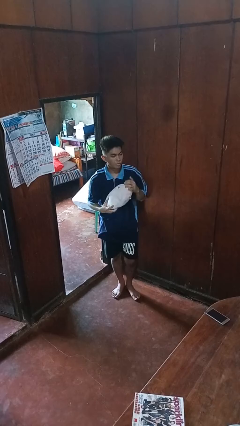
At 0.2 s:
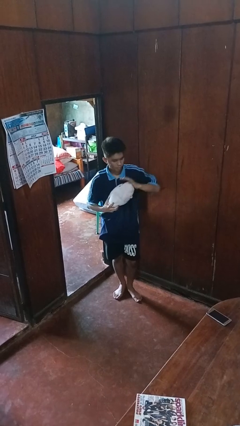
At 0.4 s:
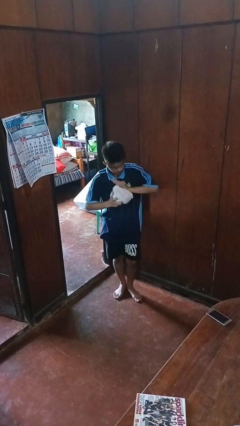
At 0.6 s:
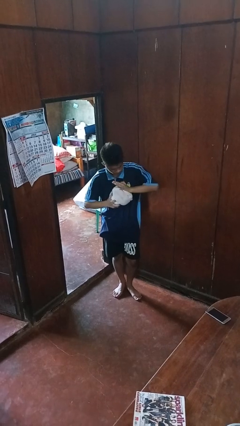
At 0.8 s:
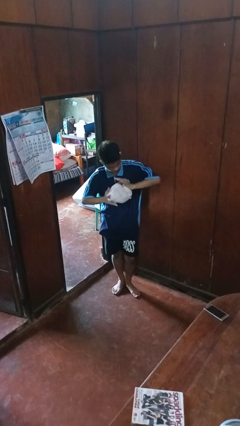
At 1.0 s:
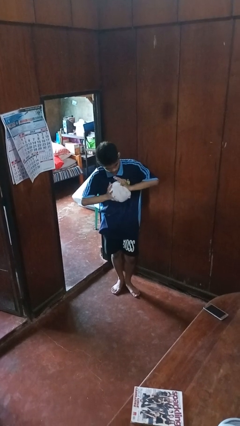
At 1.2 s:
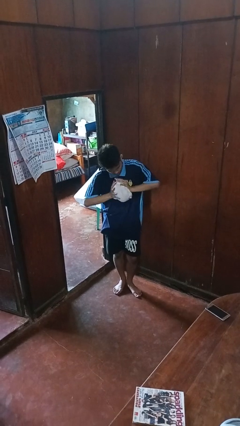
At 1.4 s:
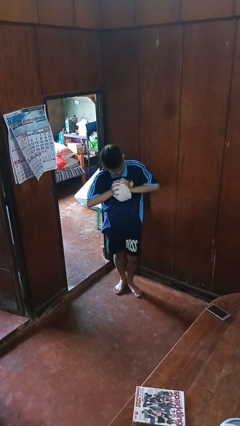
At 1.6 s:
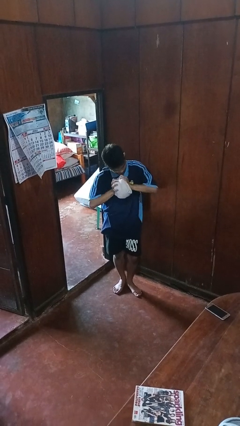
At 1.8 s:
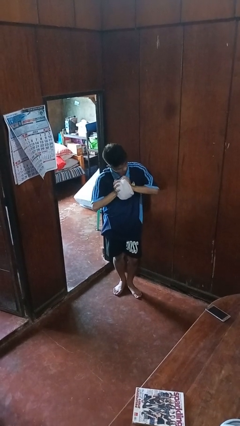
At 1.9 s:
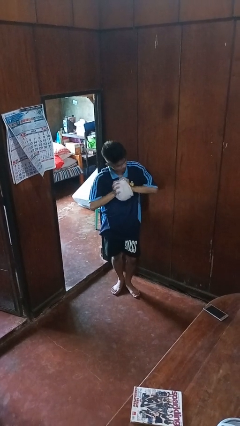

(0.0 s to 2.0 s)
person squeezes object

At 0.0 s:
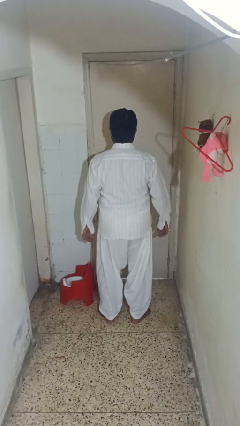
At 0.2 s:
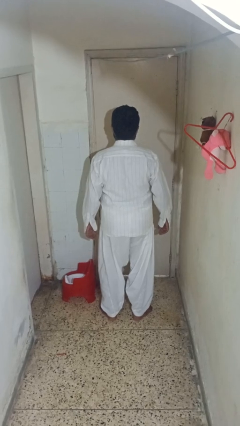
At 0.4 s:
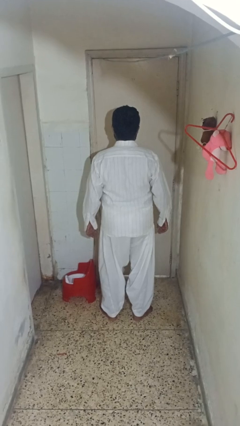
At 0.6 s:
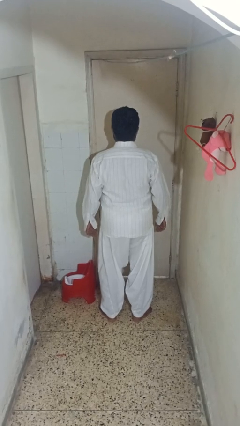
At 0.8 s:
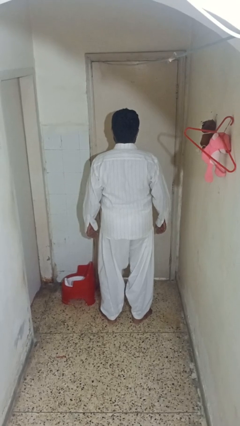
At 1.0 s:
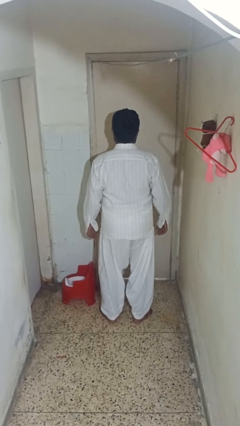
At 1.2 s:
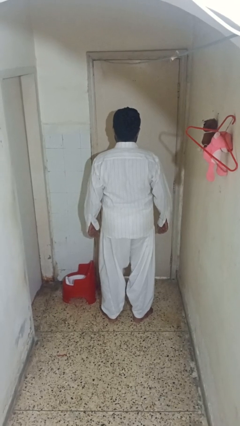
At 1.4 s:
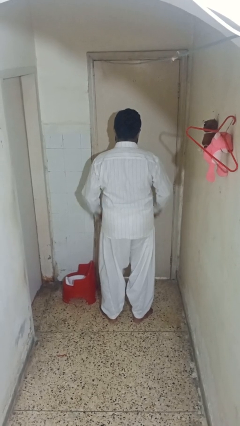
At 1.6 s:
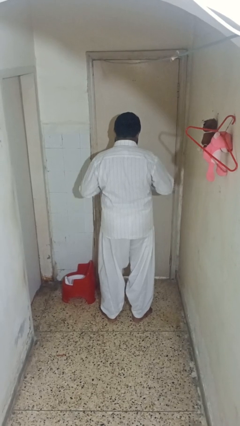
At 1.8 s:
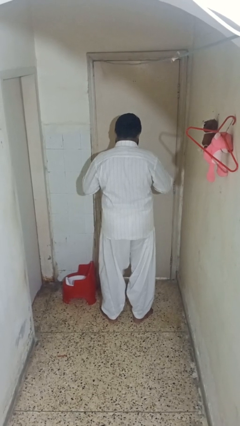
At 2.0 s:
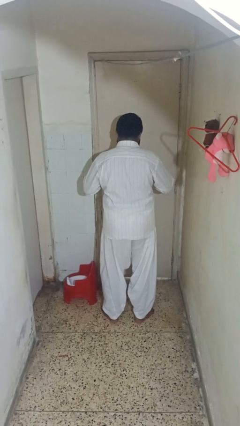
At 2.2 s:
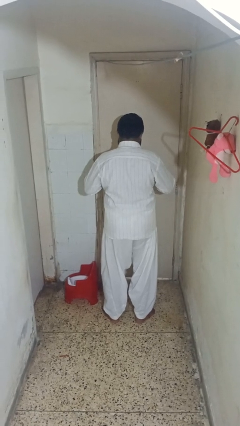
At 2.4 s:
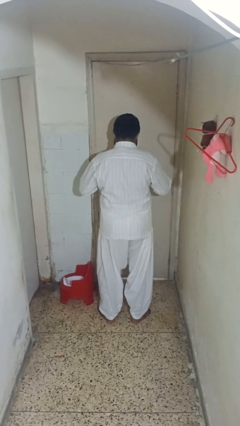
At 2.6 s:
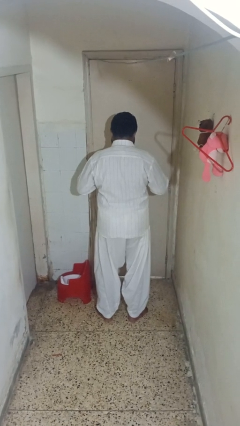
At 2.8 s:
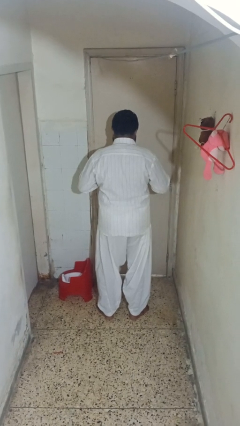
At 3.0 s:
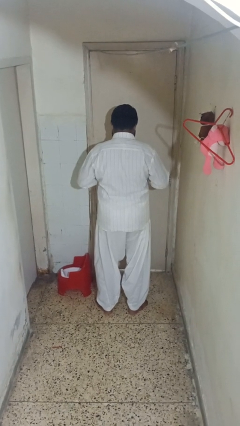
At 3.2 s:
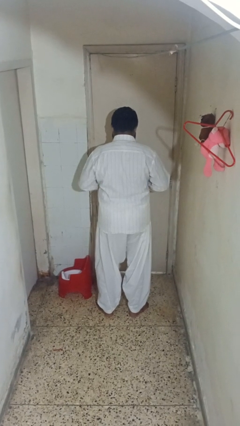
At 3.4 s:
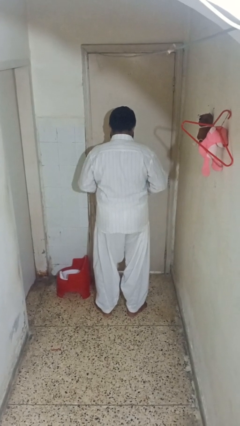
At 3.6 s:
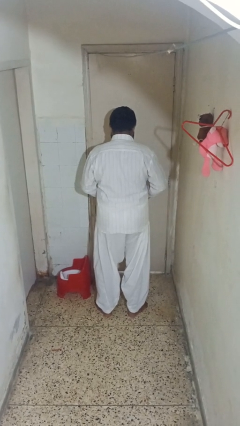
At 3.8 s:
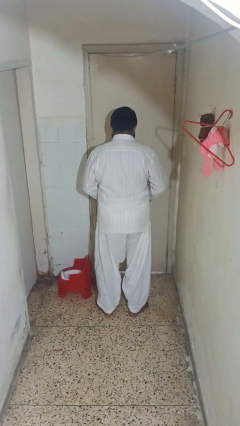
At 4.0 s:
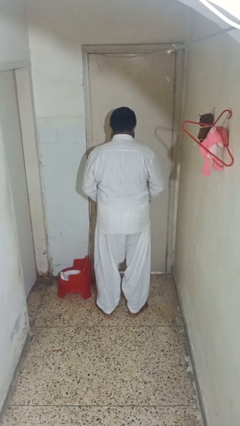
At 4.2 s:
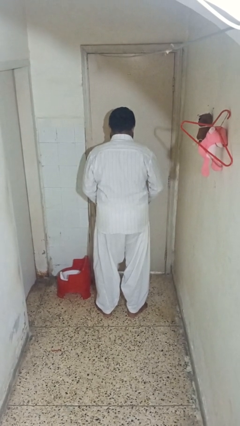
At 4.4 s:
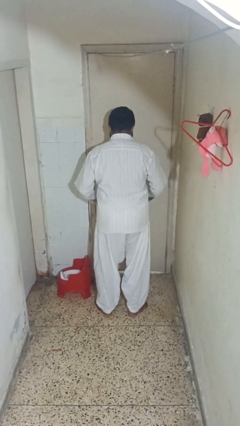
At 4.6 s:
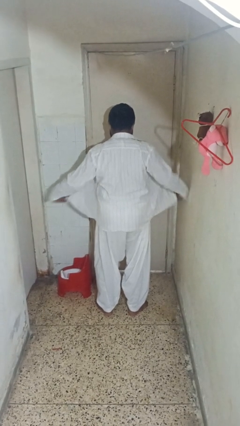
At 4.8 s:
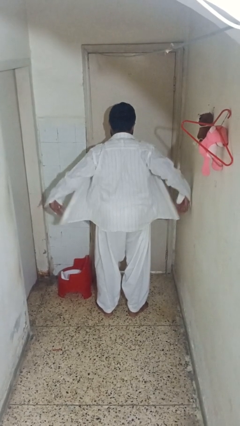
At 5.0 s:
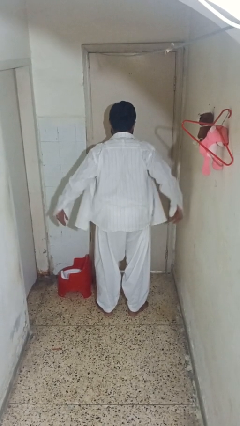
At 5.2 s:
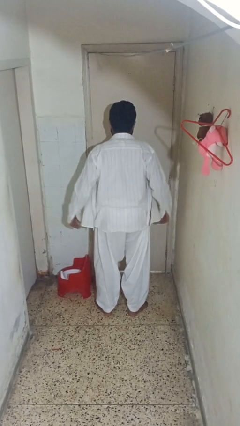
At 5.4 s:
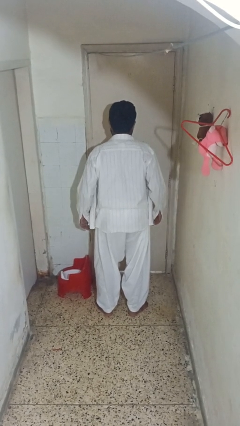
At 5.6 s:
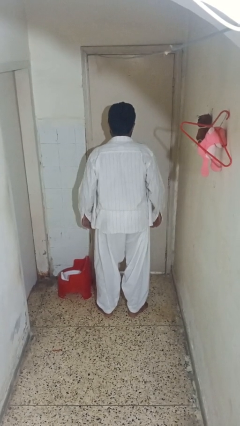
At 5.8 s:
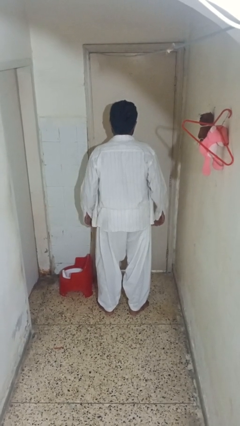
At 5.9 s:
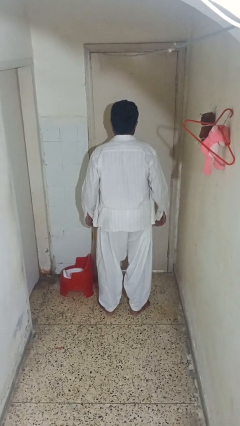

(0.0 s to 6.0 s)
person unbuttons shirt

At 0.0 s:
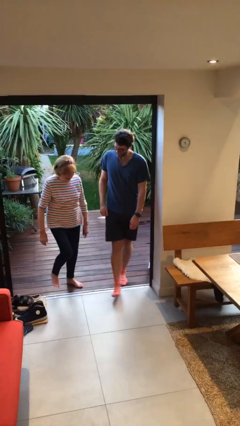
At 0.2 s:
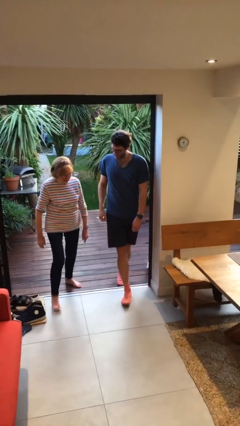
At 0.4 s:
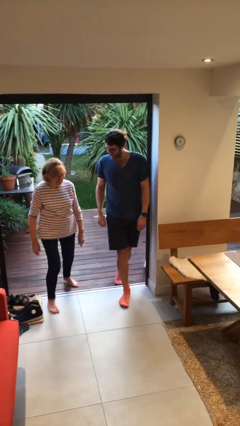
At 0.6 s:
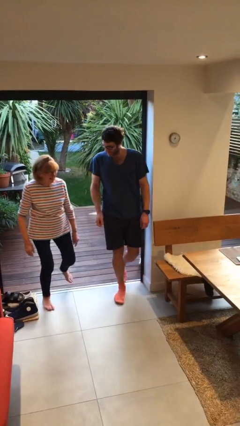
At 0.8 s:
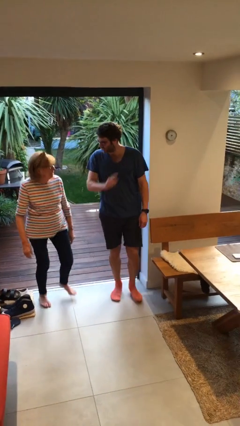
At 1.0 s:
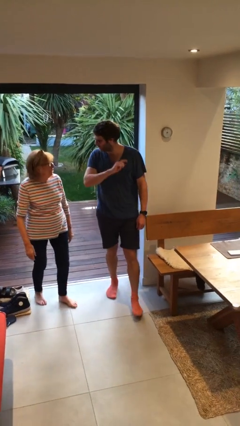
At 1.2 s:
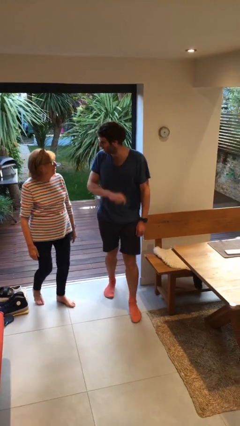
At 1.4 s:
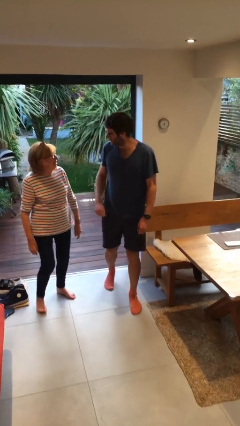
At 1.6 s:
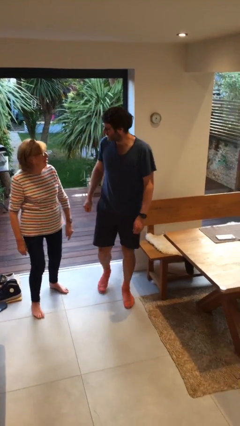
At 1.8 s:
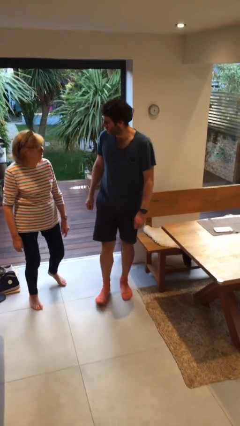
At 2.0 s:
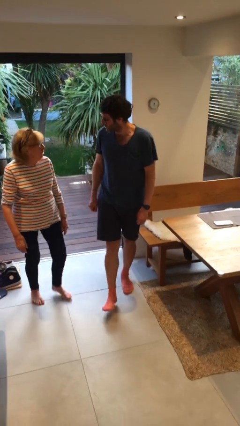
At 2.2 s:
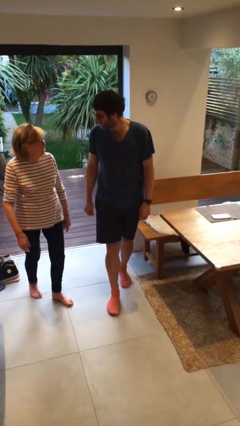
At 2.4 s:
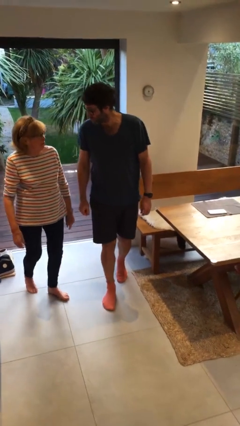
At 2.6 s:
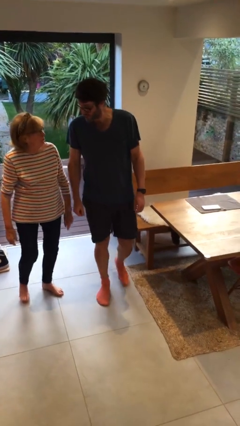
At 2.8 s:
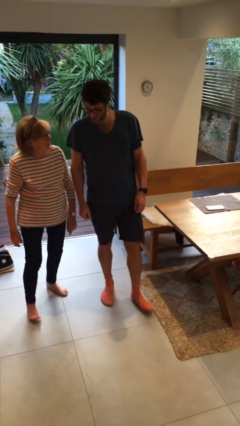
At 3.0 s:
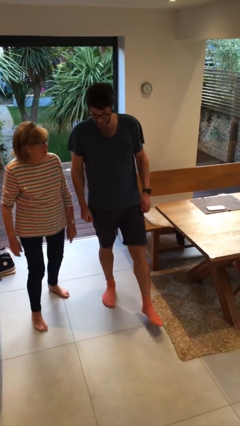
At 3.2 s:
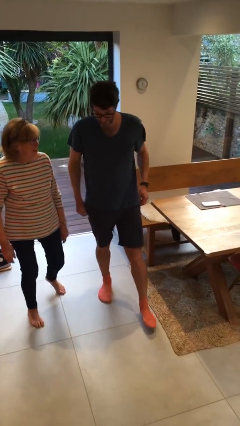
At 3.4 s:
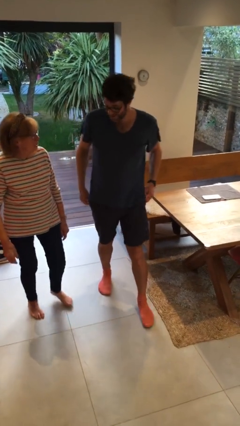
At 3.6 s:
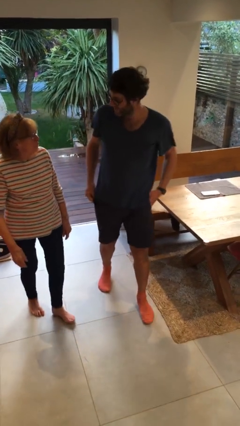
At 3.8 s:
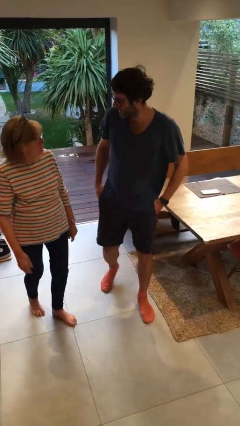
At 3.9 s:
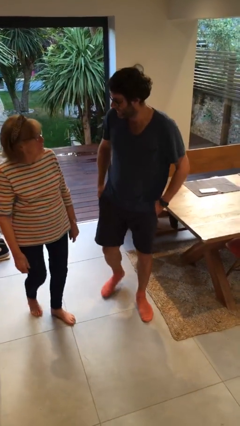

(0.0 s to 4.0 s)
person talks to person

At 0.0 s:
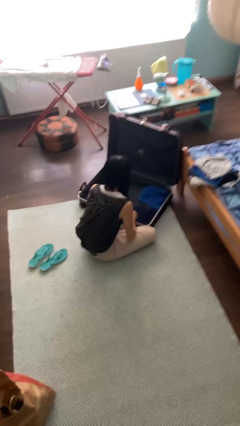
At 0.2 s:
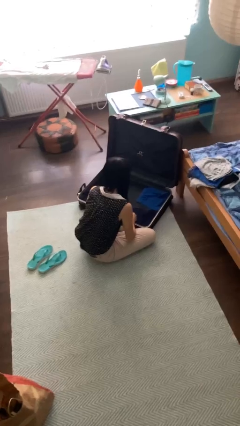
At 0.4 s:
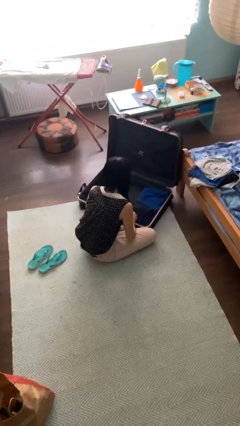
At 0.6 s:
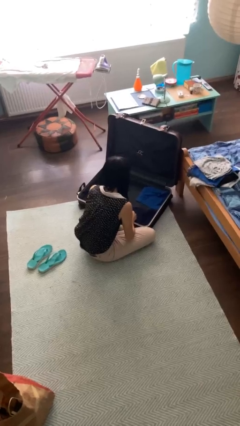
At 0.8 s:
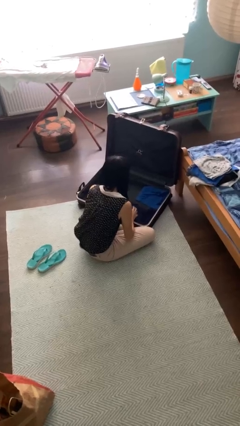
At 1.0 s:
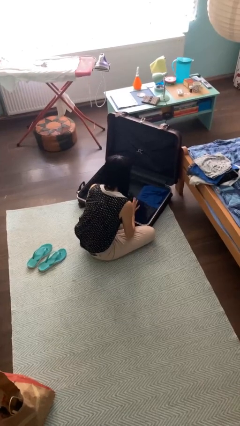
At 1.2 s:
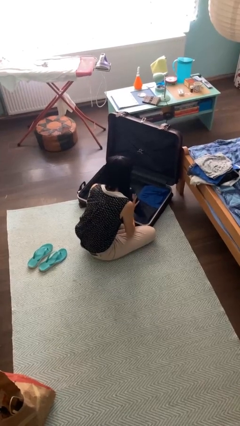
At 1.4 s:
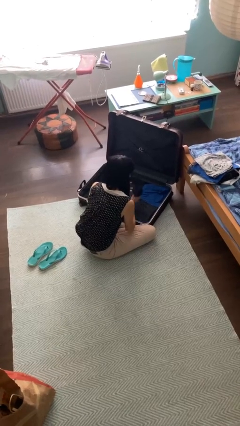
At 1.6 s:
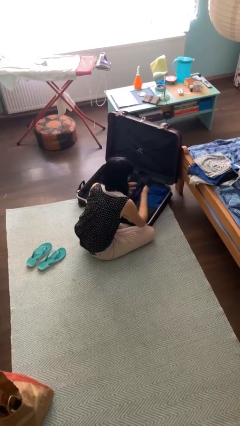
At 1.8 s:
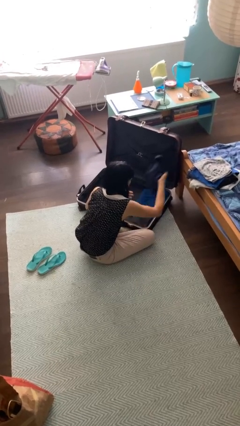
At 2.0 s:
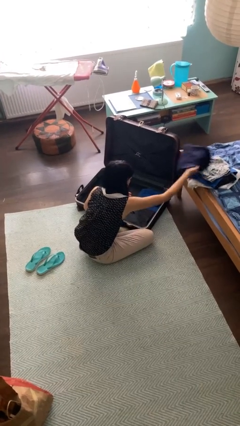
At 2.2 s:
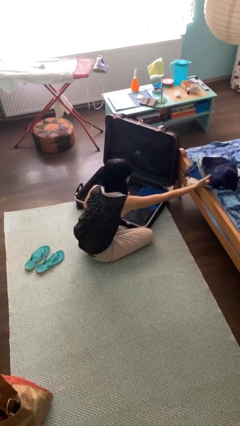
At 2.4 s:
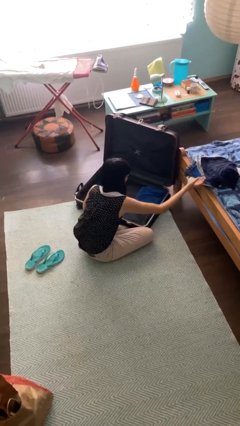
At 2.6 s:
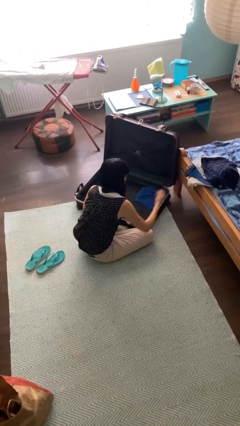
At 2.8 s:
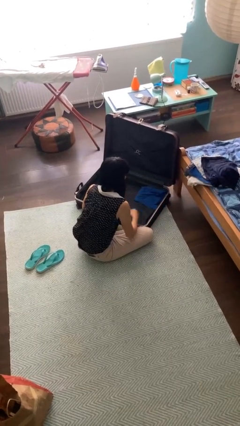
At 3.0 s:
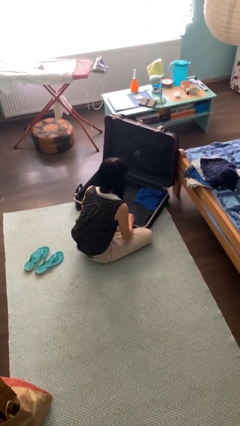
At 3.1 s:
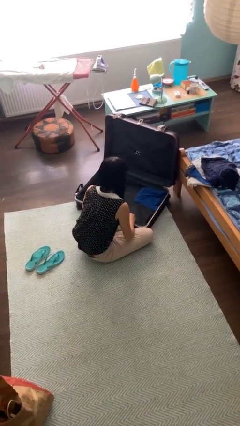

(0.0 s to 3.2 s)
person unloads clothes from suitcase

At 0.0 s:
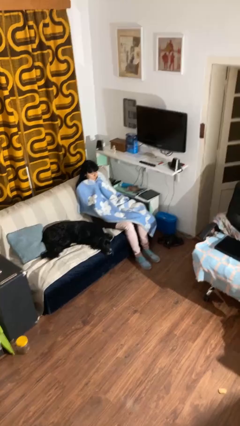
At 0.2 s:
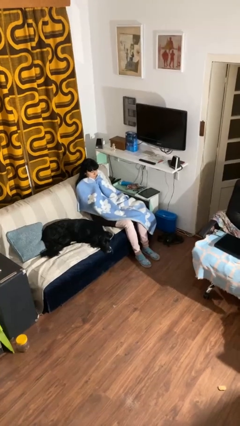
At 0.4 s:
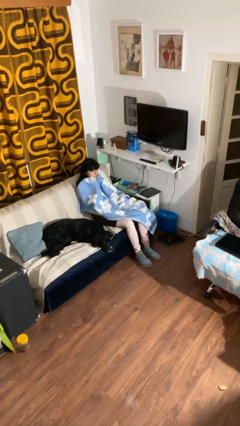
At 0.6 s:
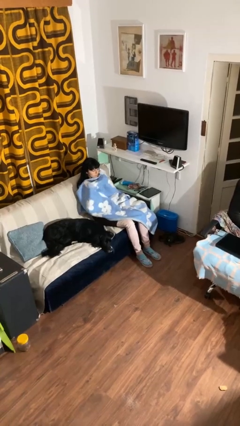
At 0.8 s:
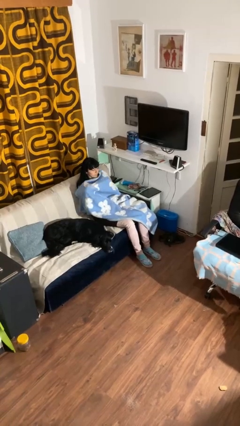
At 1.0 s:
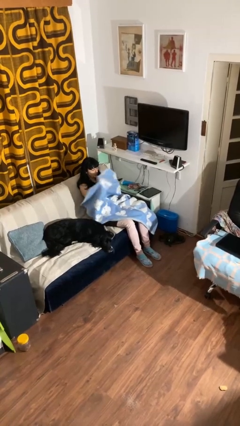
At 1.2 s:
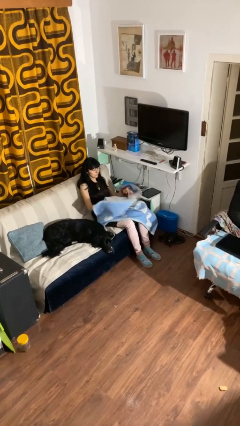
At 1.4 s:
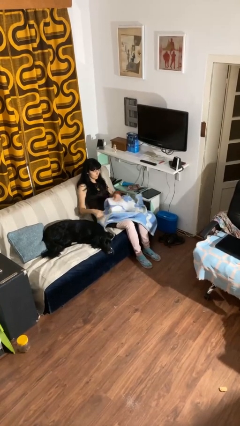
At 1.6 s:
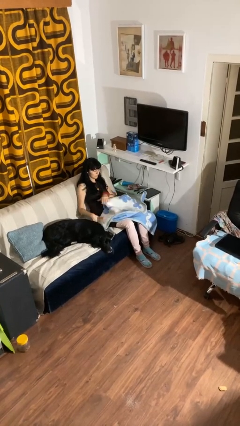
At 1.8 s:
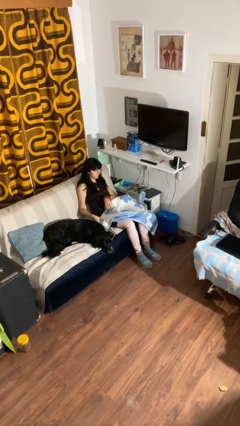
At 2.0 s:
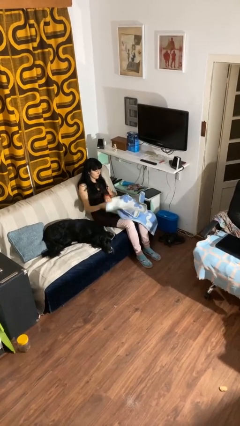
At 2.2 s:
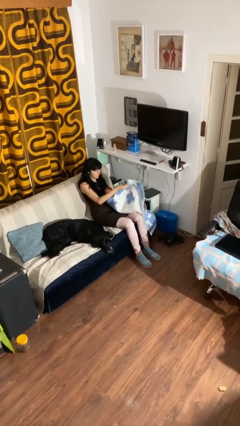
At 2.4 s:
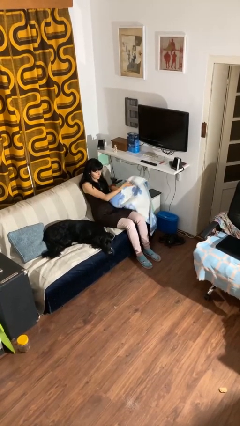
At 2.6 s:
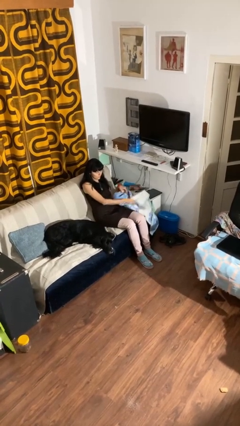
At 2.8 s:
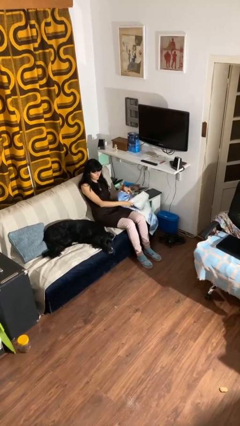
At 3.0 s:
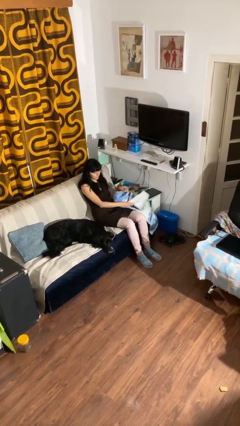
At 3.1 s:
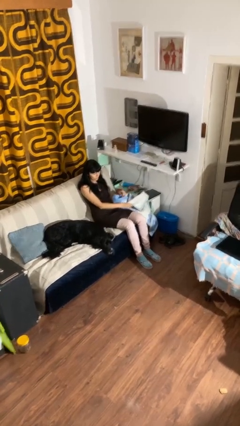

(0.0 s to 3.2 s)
person uncovers with blanket
